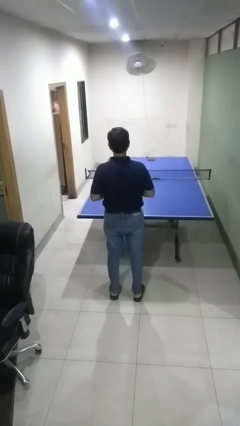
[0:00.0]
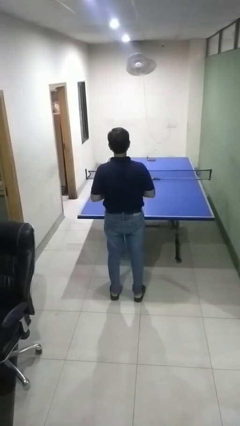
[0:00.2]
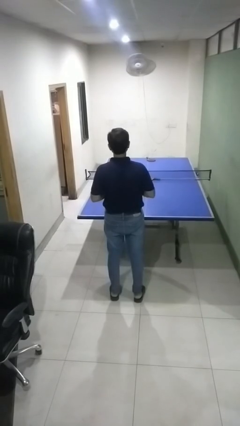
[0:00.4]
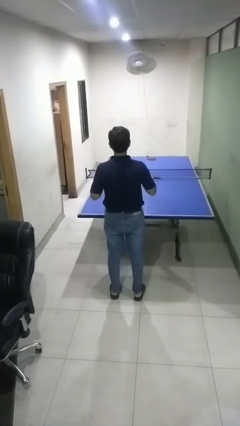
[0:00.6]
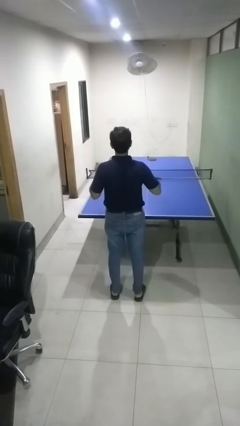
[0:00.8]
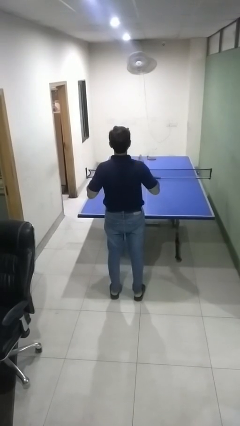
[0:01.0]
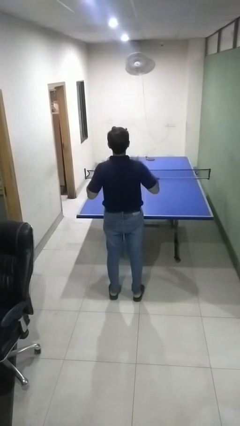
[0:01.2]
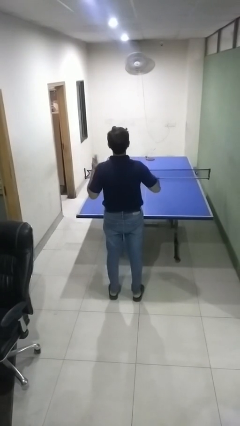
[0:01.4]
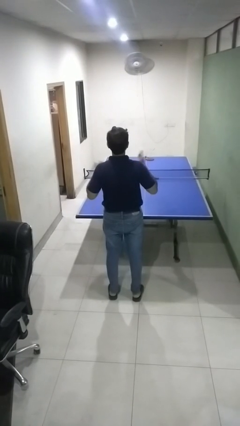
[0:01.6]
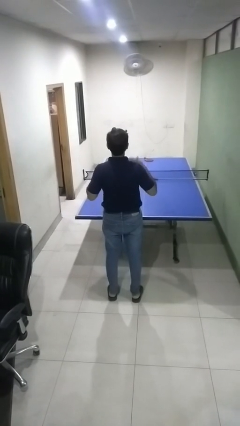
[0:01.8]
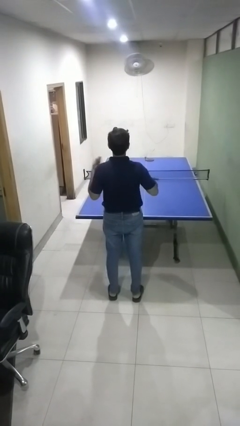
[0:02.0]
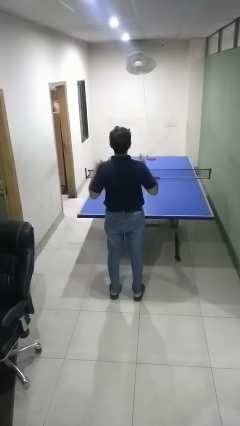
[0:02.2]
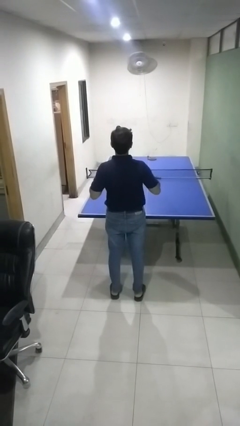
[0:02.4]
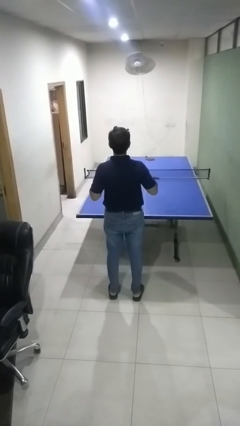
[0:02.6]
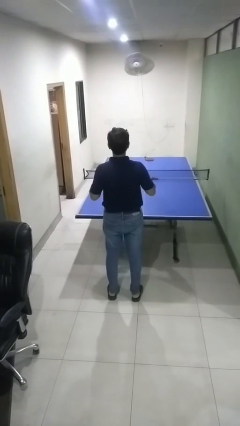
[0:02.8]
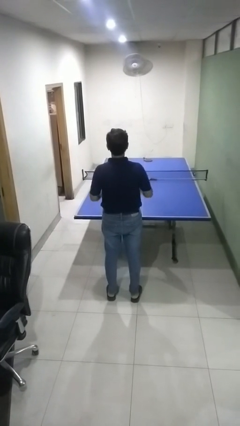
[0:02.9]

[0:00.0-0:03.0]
person drums on chest

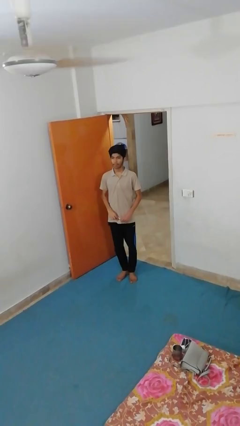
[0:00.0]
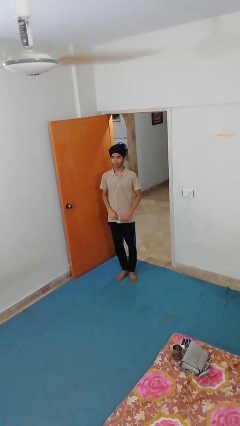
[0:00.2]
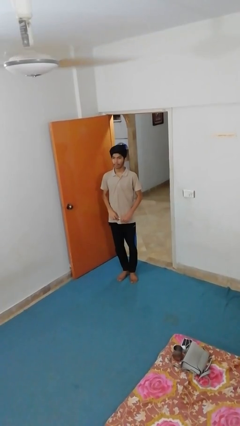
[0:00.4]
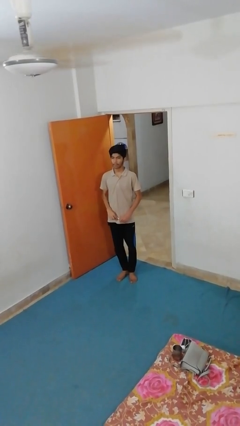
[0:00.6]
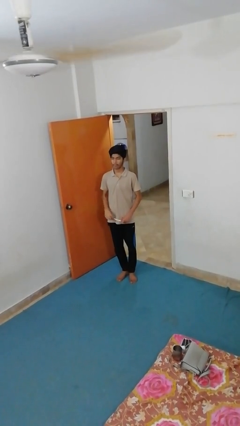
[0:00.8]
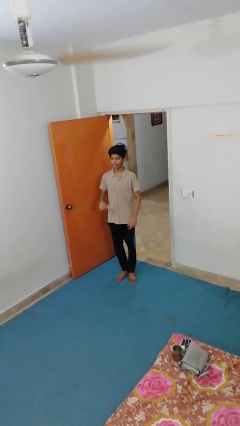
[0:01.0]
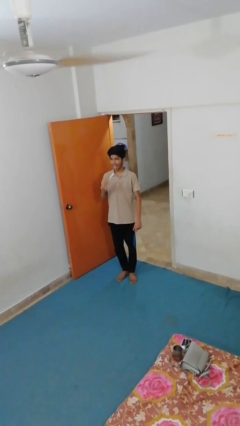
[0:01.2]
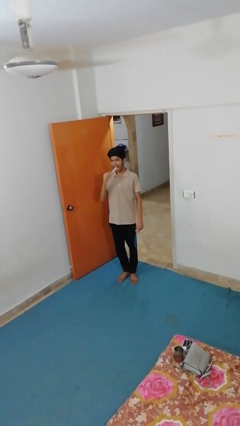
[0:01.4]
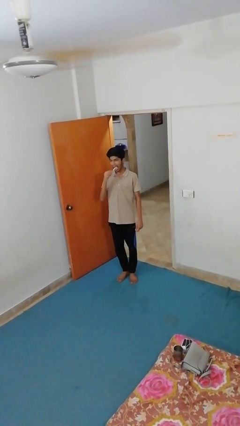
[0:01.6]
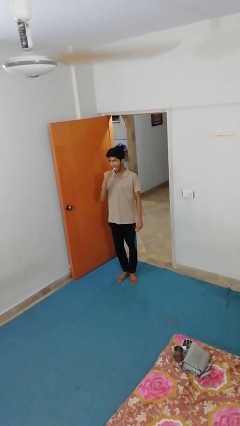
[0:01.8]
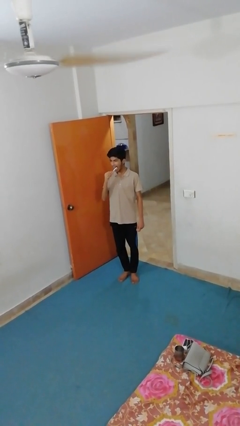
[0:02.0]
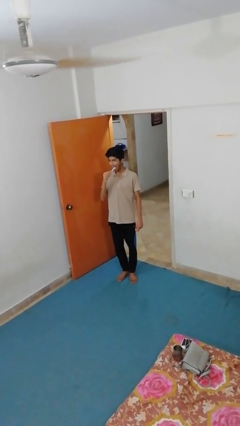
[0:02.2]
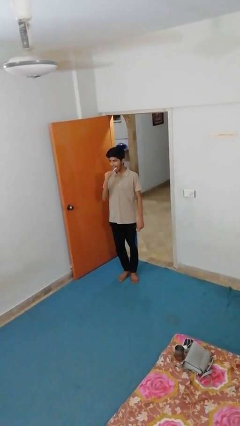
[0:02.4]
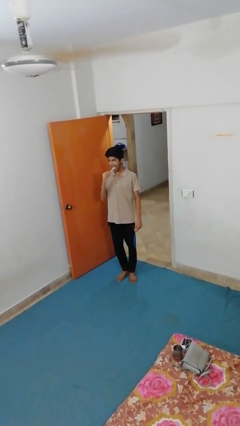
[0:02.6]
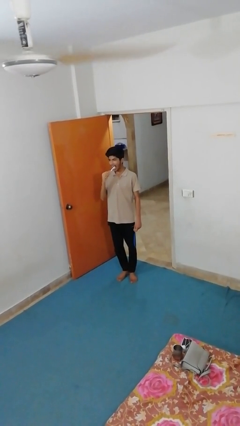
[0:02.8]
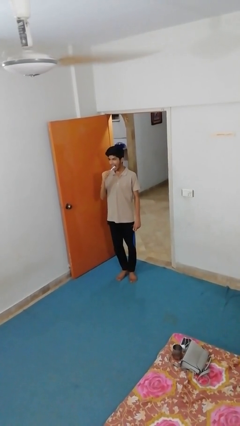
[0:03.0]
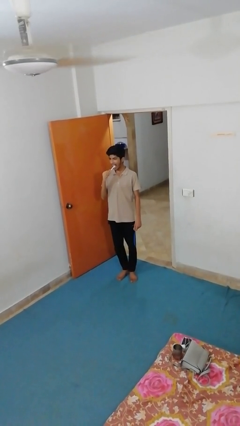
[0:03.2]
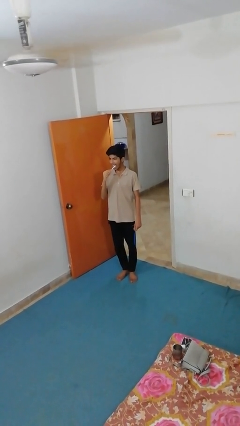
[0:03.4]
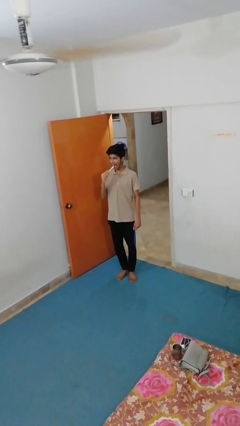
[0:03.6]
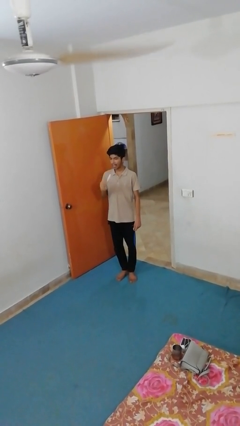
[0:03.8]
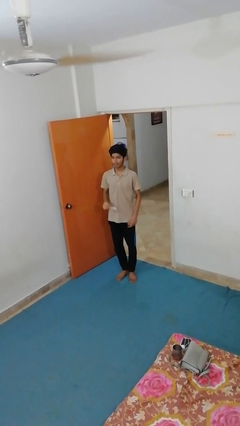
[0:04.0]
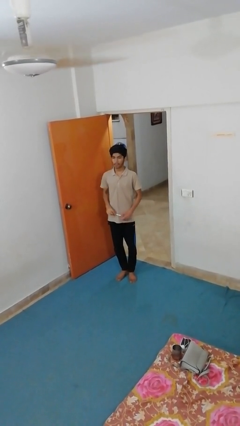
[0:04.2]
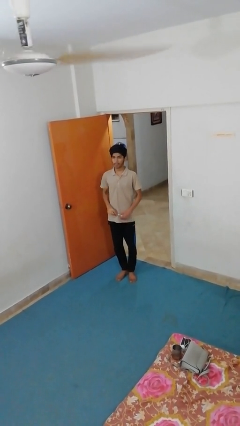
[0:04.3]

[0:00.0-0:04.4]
person brushes teeth

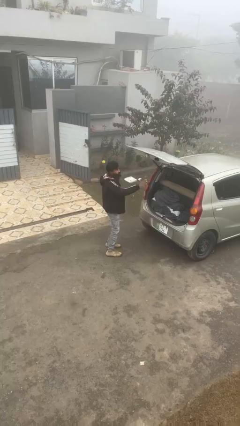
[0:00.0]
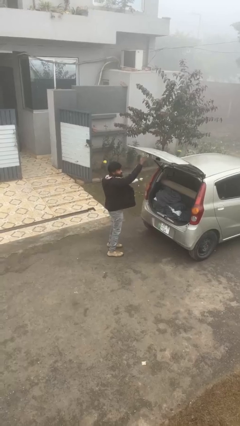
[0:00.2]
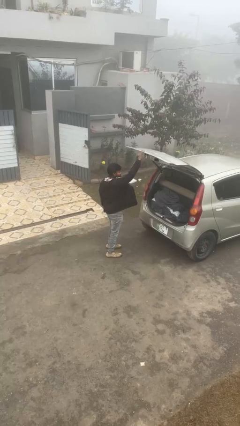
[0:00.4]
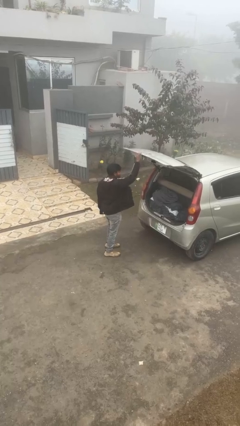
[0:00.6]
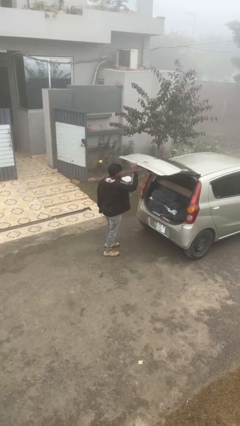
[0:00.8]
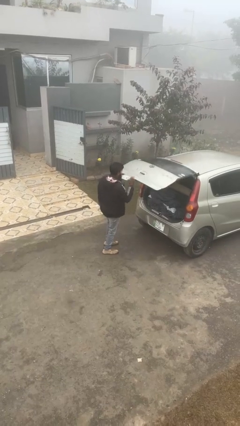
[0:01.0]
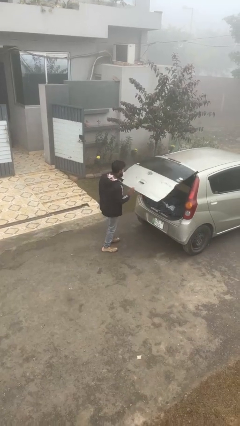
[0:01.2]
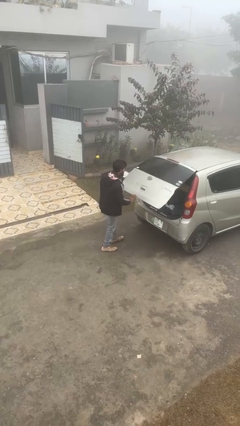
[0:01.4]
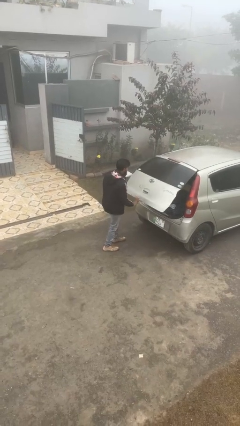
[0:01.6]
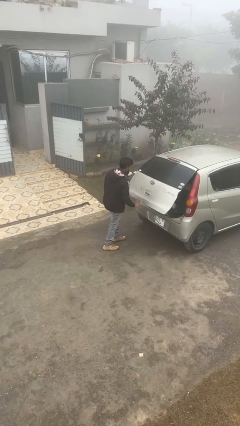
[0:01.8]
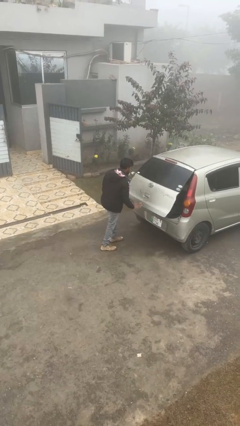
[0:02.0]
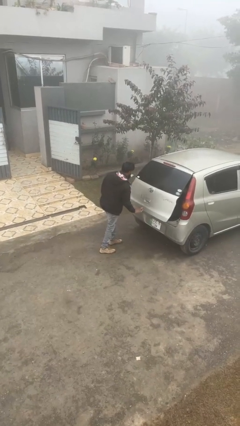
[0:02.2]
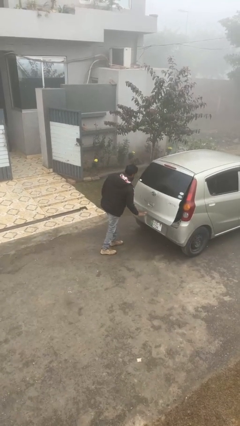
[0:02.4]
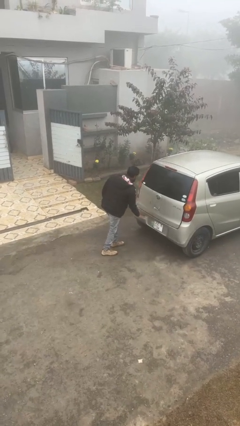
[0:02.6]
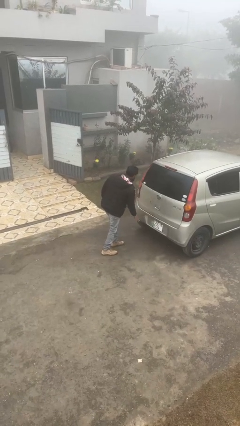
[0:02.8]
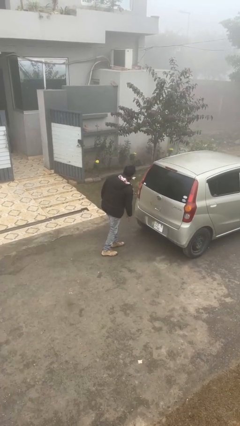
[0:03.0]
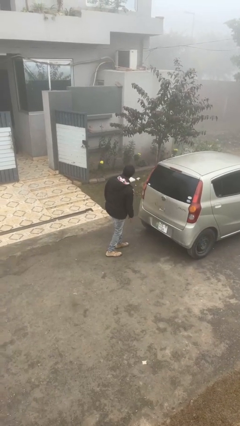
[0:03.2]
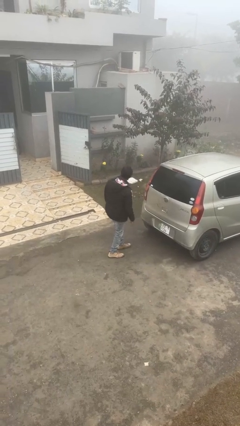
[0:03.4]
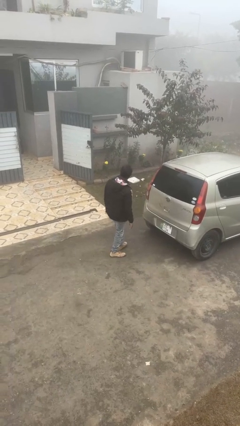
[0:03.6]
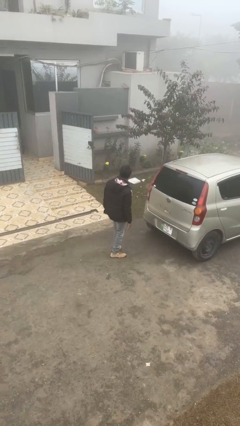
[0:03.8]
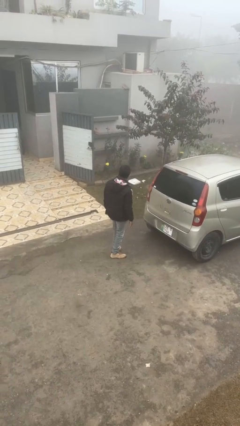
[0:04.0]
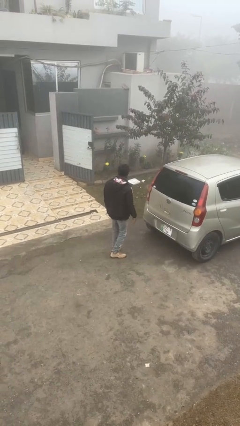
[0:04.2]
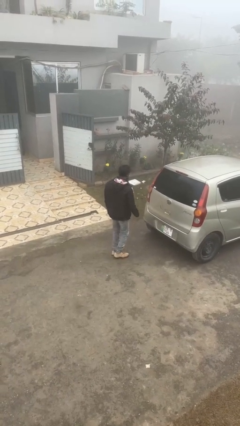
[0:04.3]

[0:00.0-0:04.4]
person closes car trunk

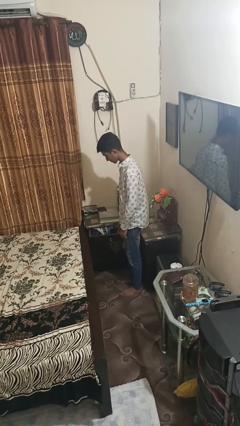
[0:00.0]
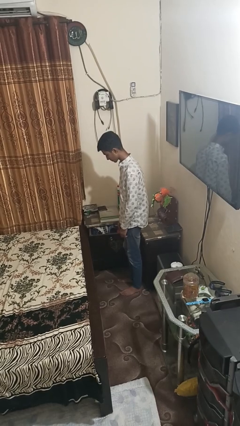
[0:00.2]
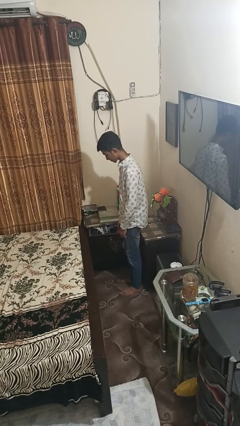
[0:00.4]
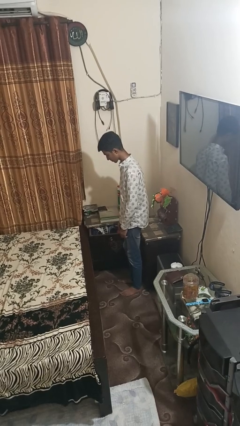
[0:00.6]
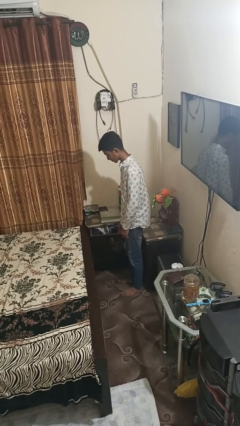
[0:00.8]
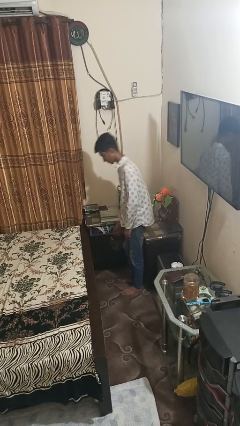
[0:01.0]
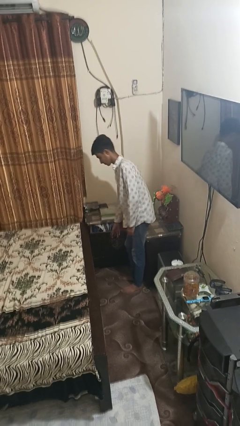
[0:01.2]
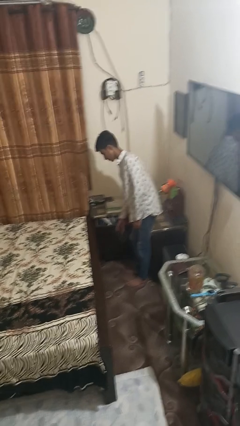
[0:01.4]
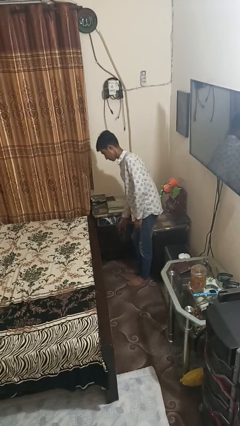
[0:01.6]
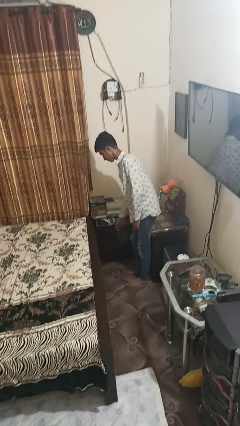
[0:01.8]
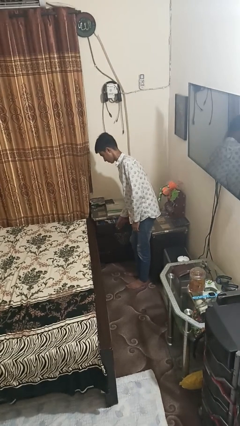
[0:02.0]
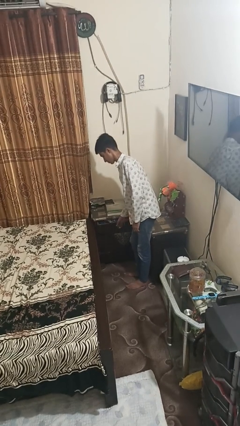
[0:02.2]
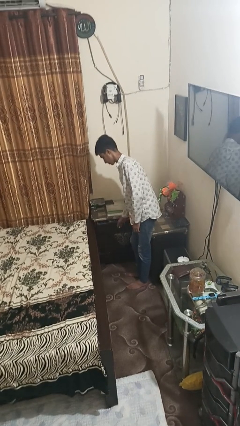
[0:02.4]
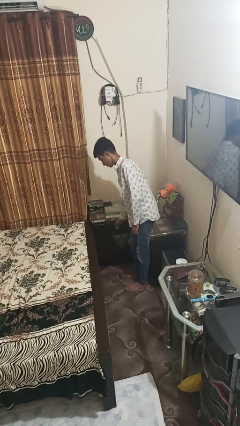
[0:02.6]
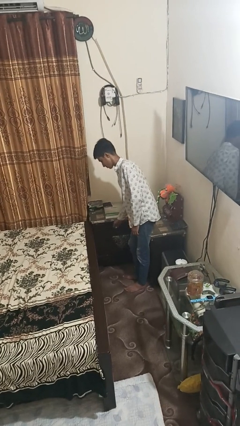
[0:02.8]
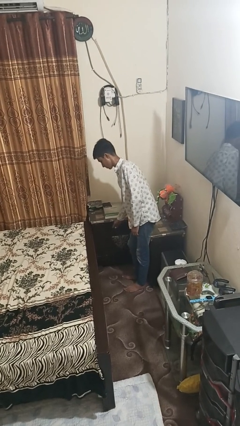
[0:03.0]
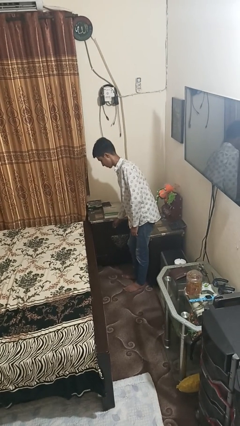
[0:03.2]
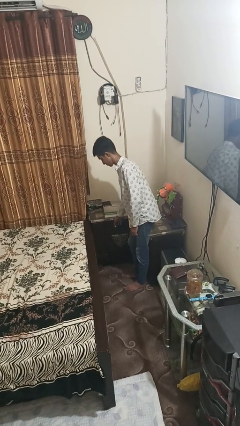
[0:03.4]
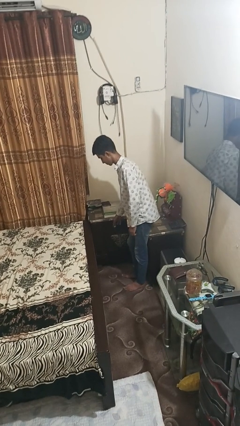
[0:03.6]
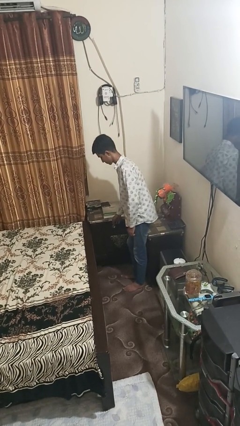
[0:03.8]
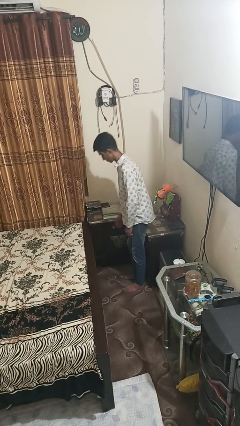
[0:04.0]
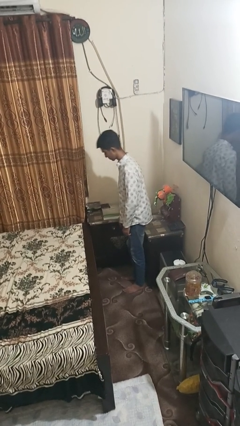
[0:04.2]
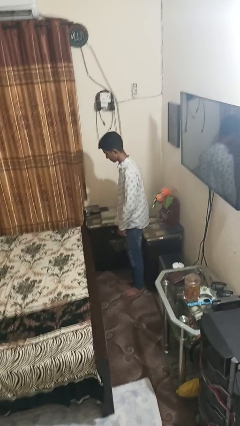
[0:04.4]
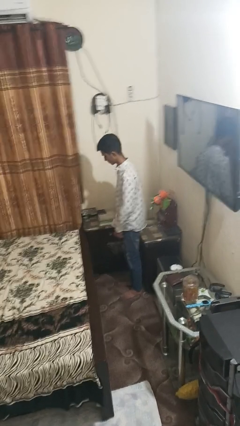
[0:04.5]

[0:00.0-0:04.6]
person closes dresser drawer

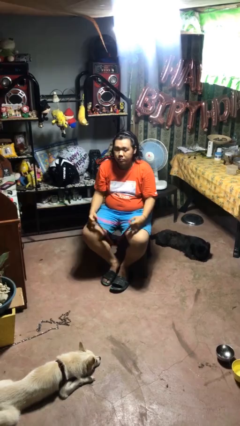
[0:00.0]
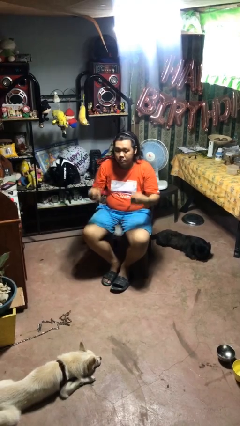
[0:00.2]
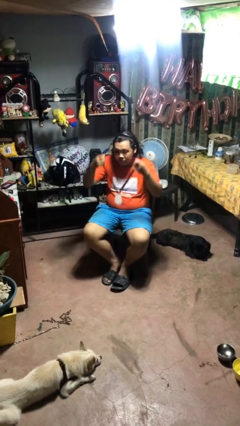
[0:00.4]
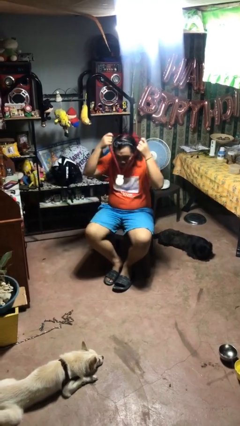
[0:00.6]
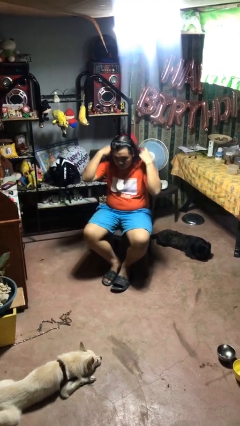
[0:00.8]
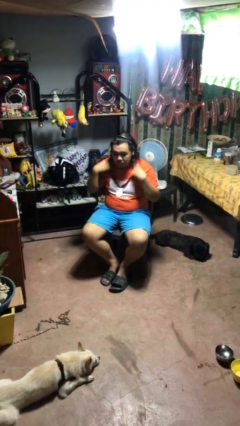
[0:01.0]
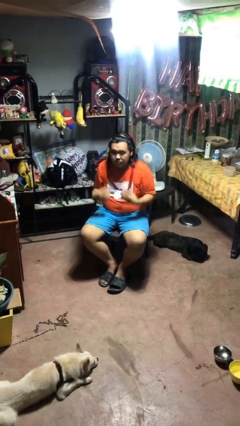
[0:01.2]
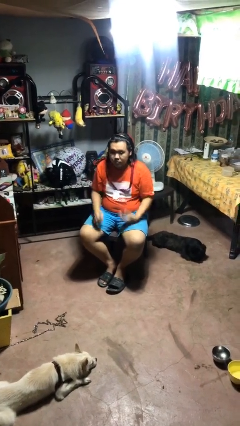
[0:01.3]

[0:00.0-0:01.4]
person puts on necklace
